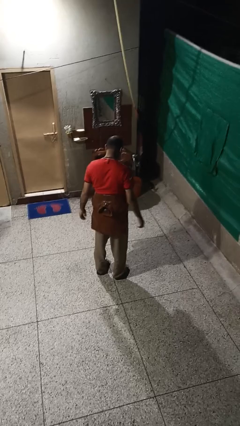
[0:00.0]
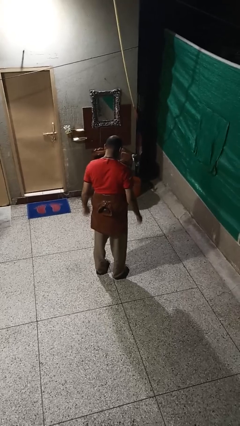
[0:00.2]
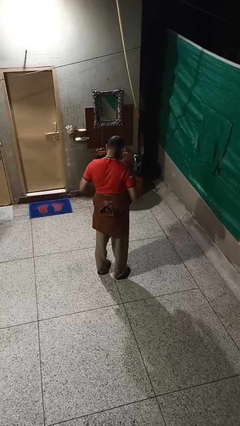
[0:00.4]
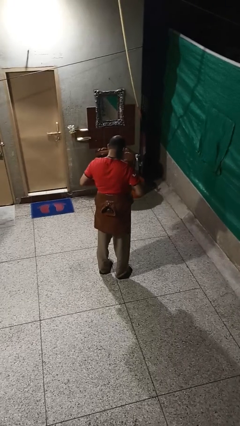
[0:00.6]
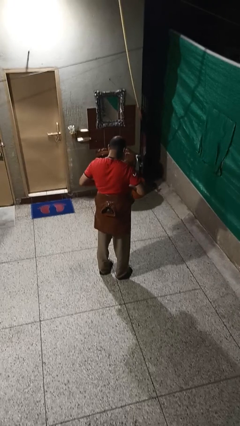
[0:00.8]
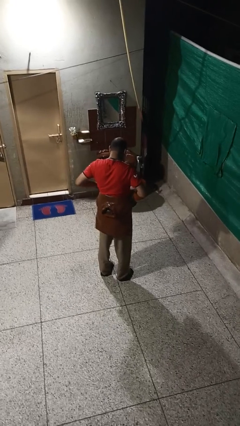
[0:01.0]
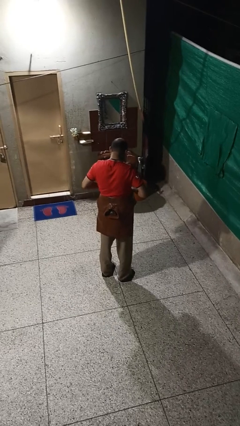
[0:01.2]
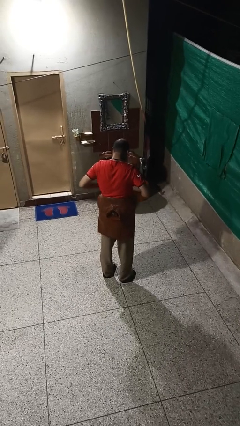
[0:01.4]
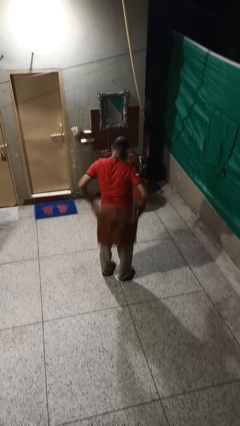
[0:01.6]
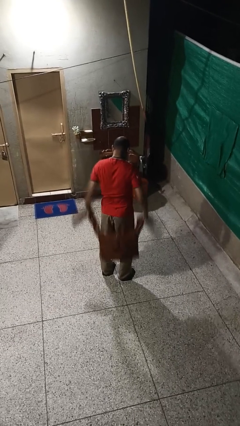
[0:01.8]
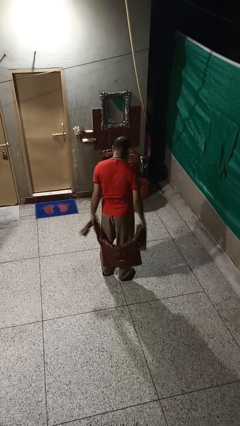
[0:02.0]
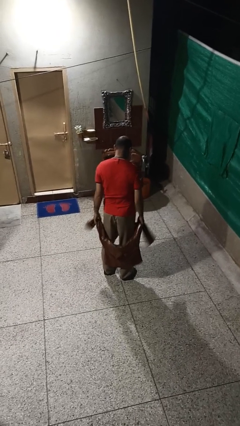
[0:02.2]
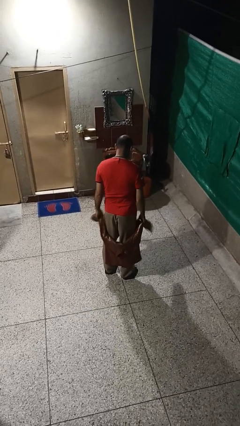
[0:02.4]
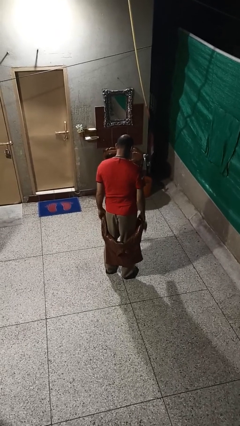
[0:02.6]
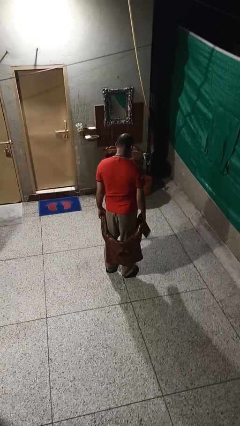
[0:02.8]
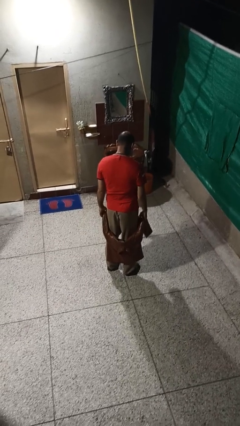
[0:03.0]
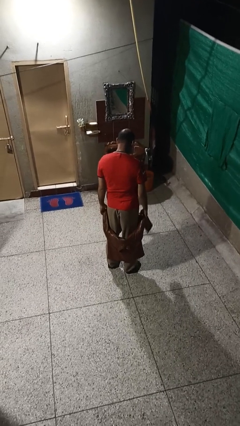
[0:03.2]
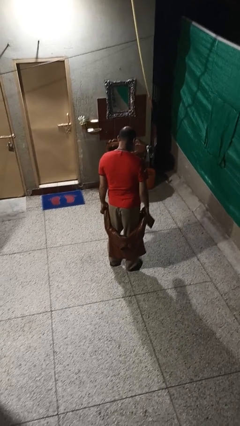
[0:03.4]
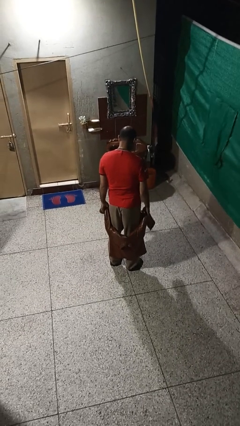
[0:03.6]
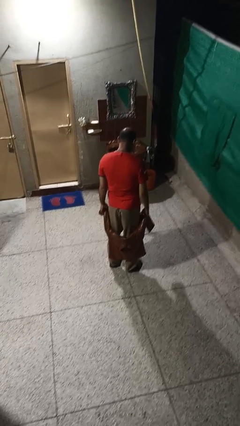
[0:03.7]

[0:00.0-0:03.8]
person unties jacket around waist

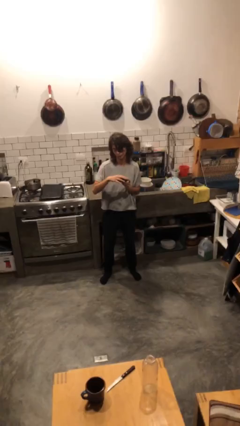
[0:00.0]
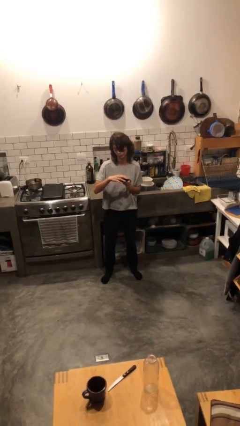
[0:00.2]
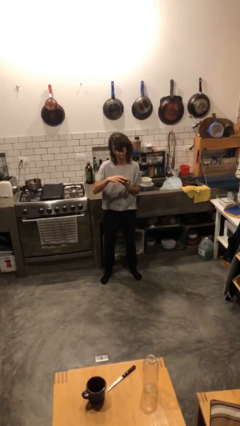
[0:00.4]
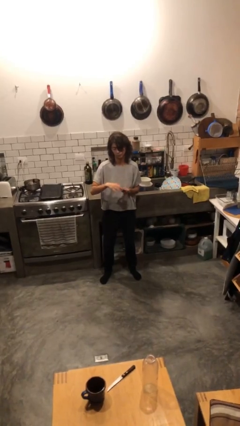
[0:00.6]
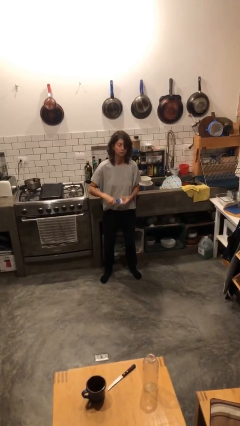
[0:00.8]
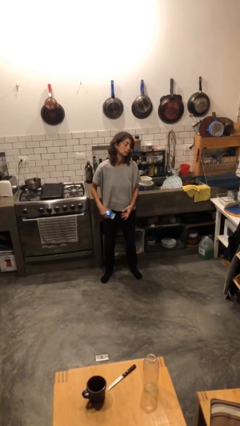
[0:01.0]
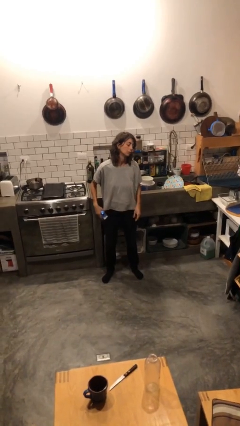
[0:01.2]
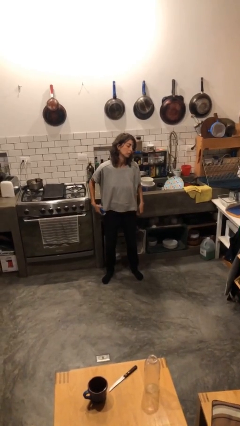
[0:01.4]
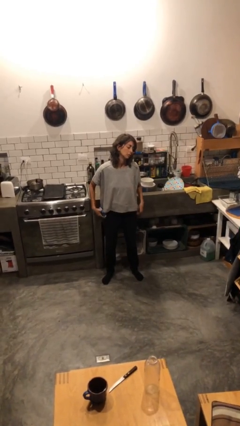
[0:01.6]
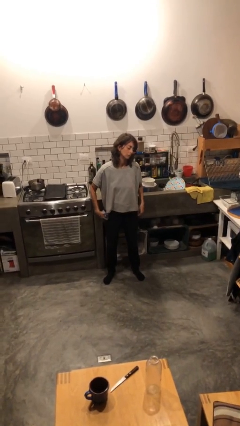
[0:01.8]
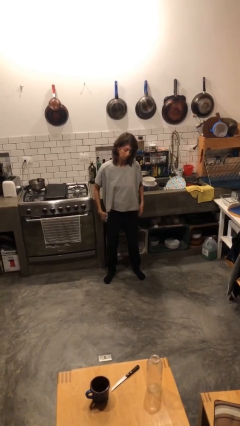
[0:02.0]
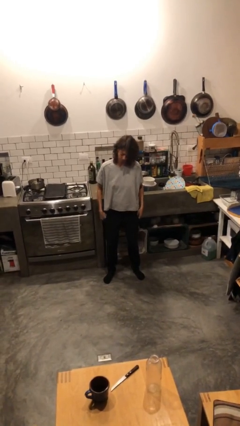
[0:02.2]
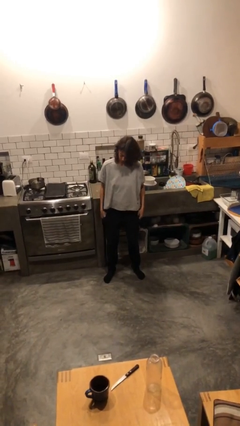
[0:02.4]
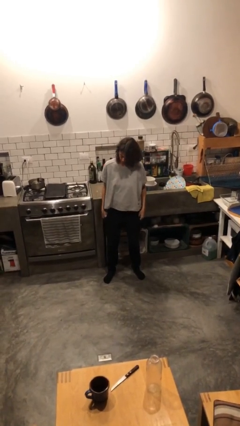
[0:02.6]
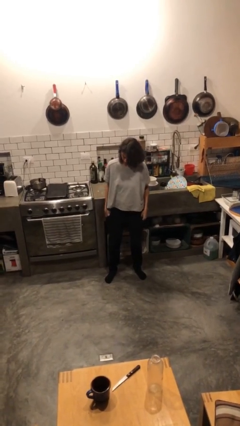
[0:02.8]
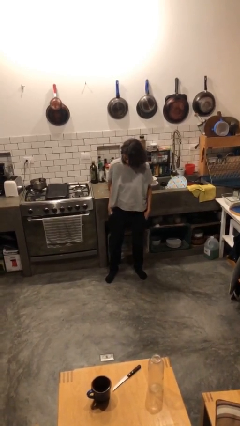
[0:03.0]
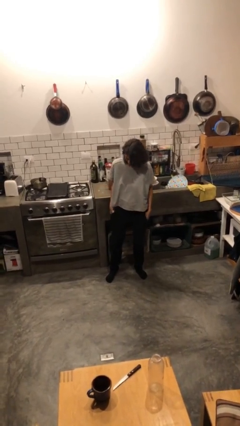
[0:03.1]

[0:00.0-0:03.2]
person puts phone into pocket

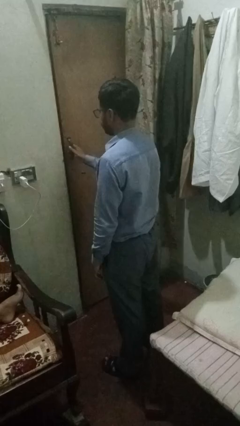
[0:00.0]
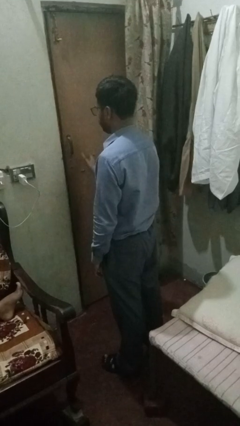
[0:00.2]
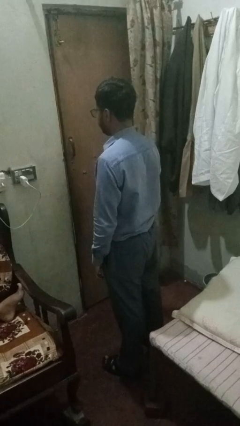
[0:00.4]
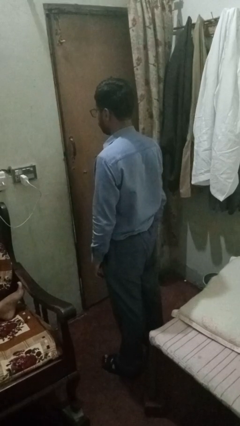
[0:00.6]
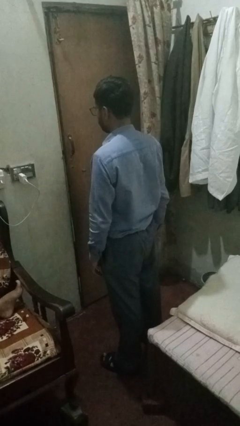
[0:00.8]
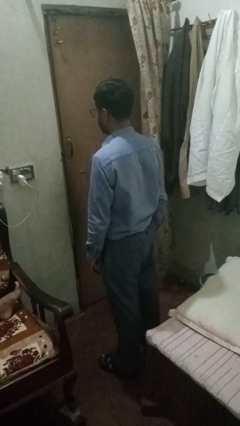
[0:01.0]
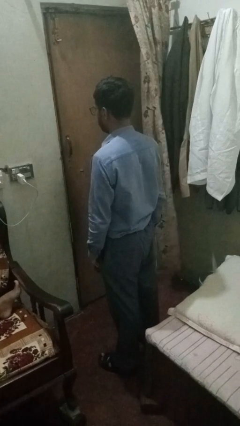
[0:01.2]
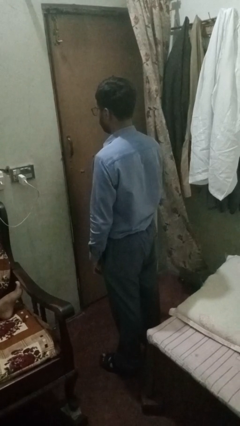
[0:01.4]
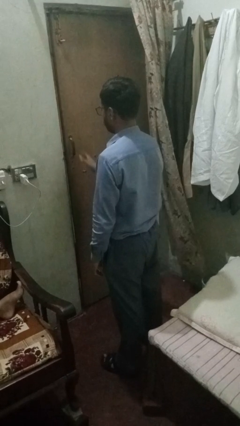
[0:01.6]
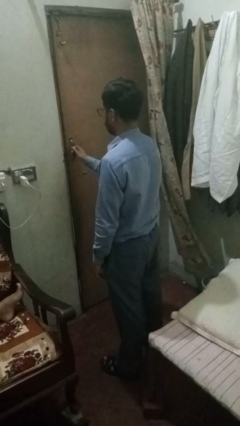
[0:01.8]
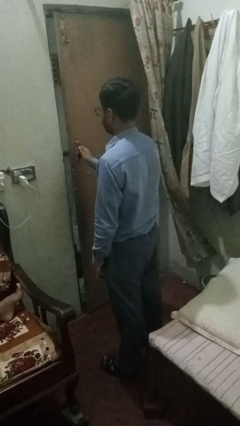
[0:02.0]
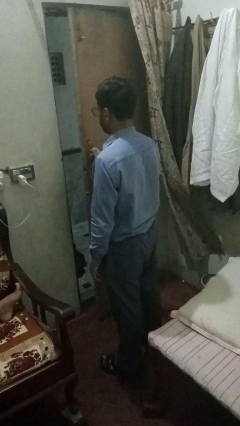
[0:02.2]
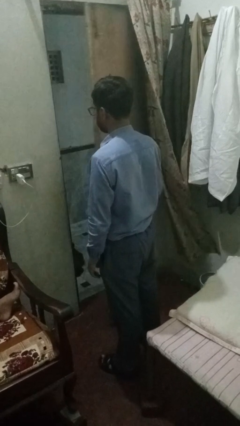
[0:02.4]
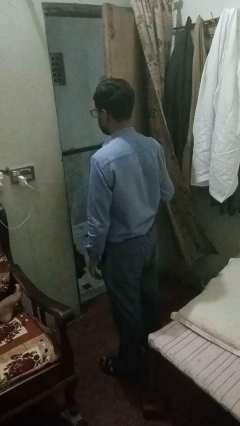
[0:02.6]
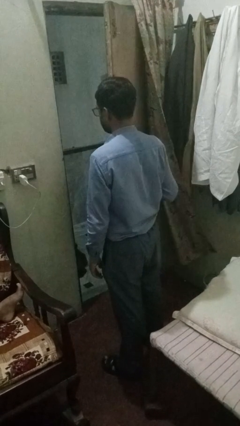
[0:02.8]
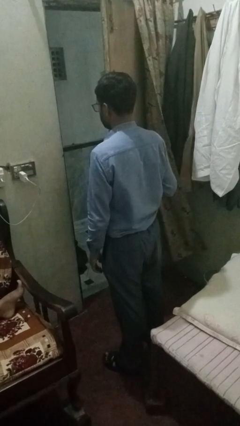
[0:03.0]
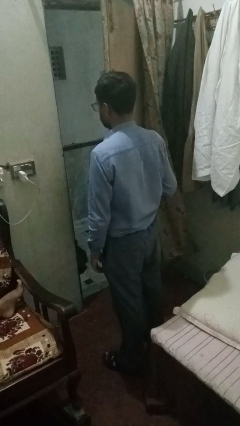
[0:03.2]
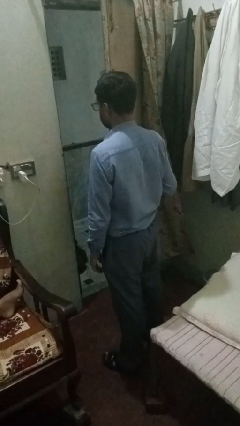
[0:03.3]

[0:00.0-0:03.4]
person opens sliding door

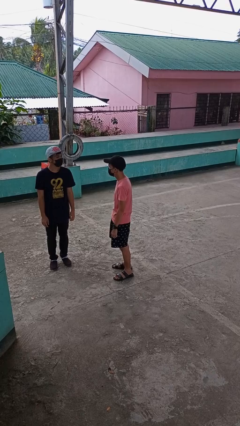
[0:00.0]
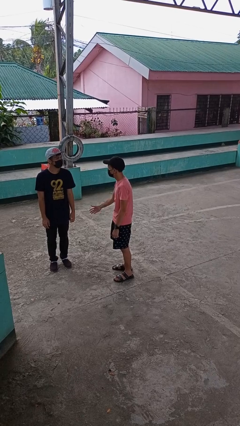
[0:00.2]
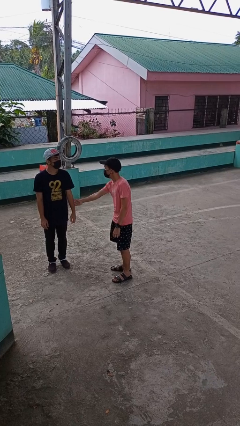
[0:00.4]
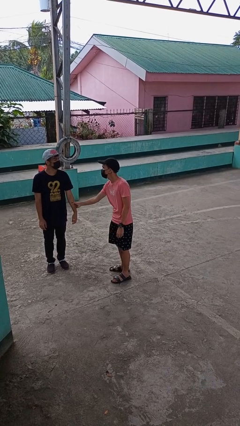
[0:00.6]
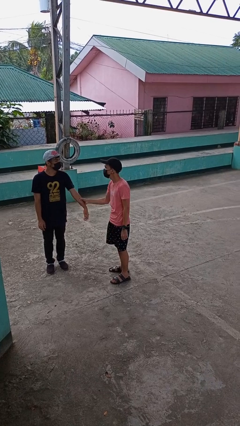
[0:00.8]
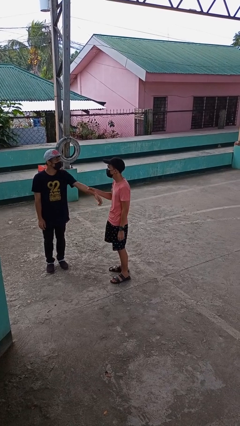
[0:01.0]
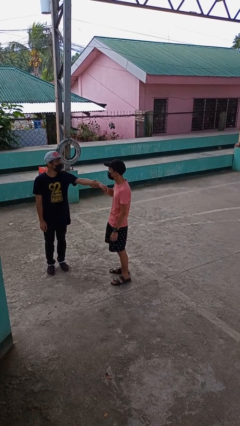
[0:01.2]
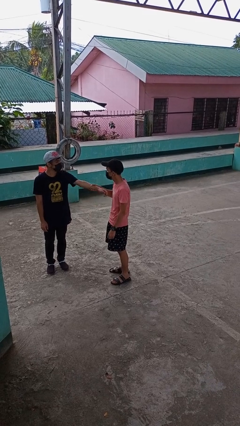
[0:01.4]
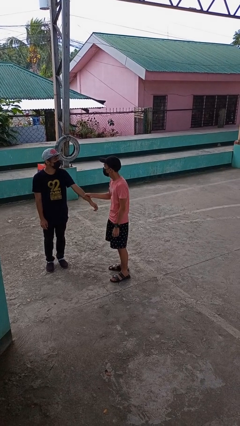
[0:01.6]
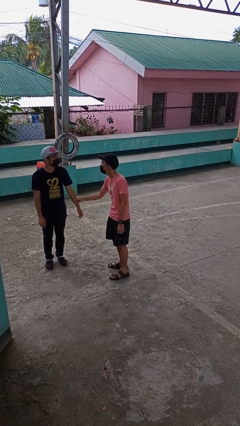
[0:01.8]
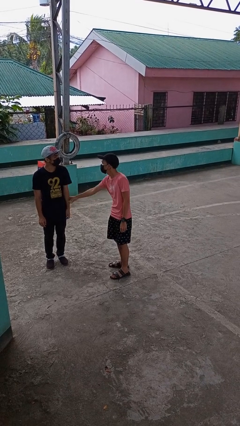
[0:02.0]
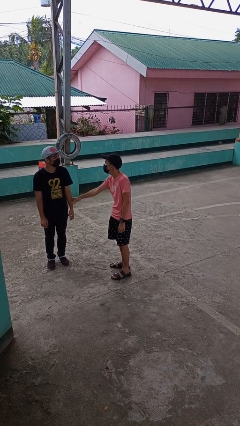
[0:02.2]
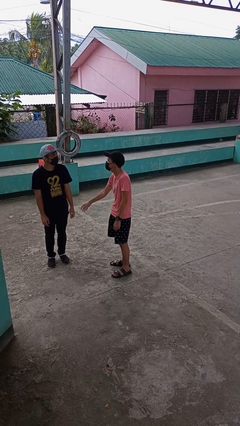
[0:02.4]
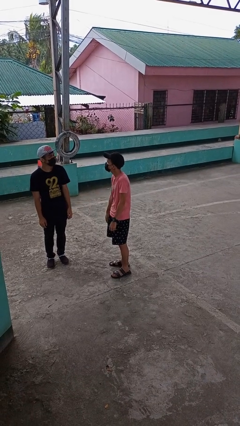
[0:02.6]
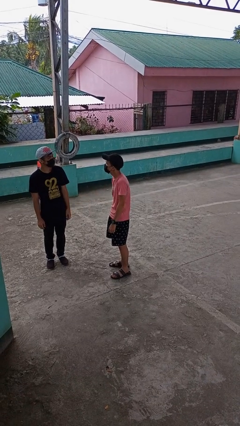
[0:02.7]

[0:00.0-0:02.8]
person grabs person by forearm

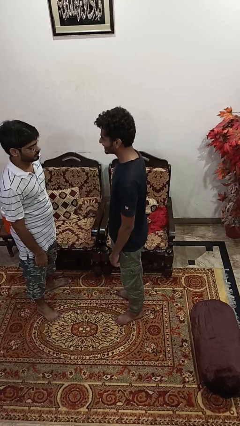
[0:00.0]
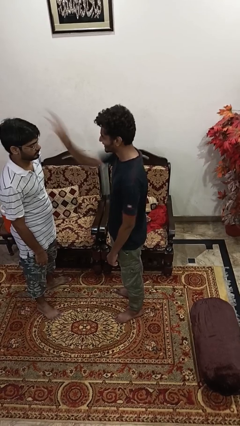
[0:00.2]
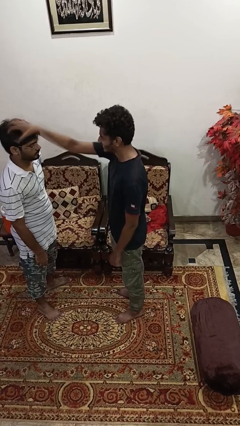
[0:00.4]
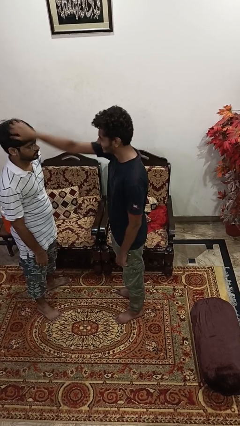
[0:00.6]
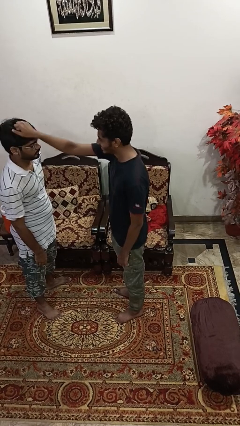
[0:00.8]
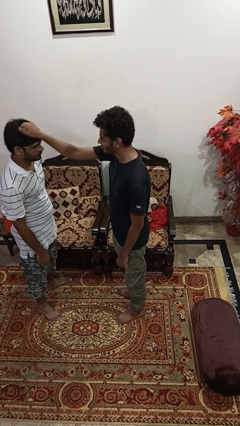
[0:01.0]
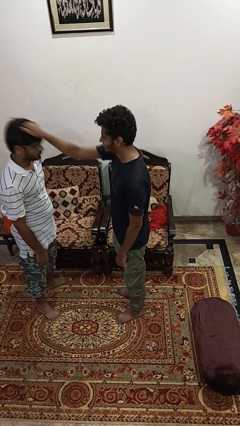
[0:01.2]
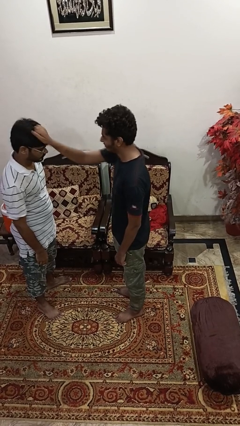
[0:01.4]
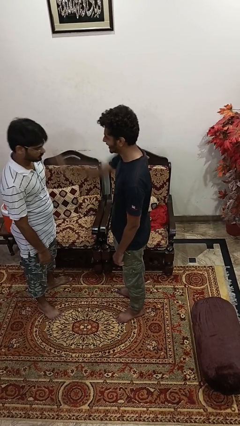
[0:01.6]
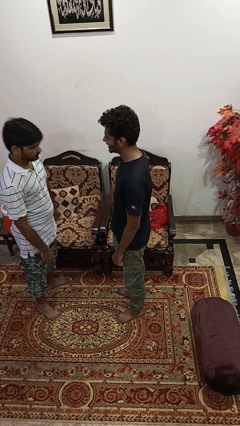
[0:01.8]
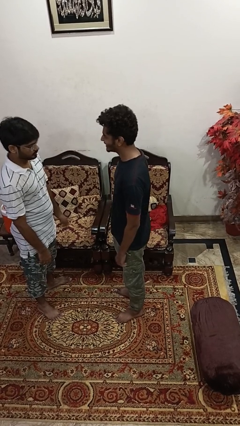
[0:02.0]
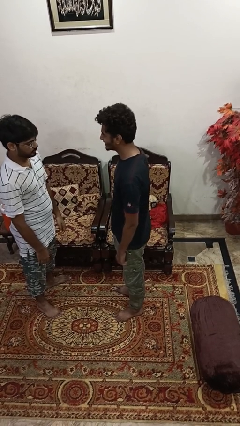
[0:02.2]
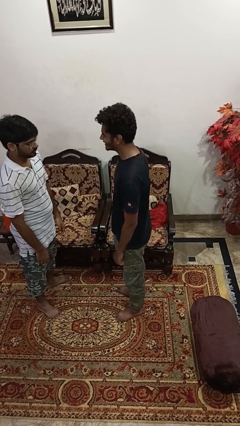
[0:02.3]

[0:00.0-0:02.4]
person spins person around

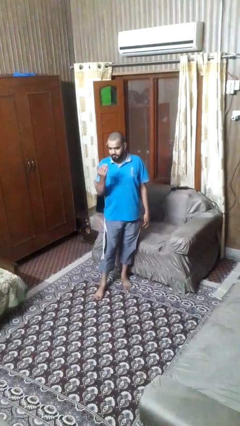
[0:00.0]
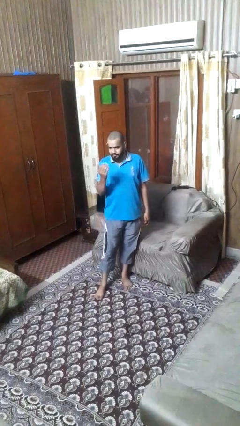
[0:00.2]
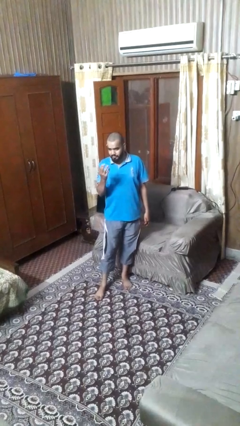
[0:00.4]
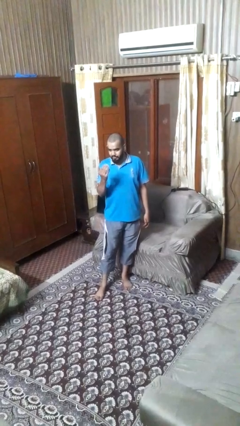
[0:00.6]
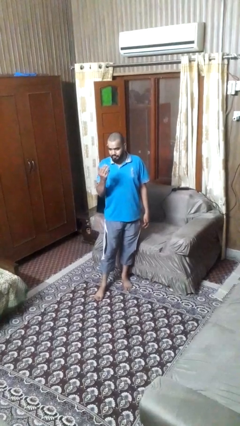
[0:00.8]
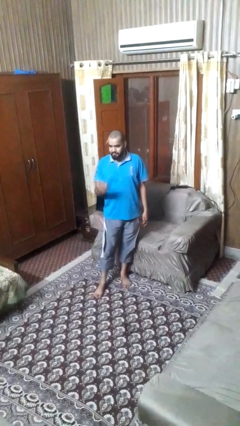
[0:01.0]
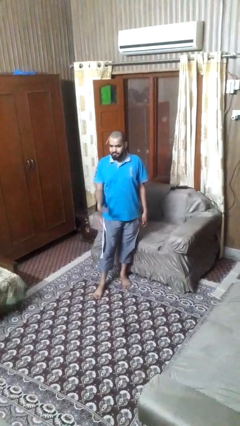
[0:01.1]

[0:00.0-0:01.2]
person gestures come here

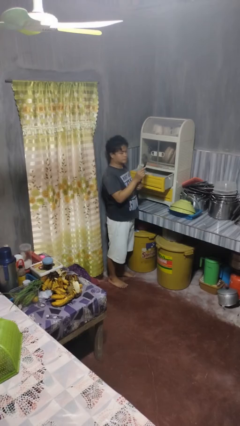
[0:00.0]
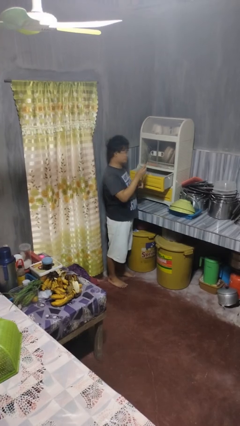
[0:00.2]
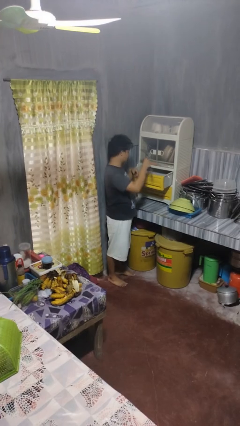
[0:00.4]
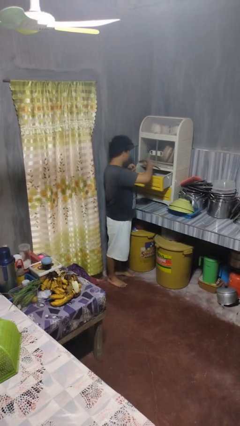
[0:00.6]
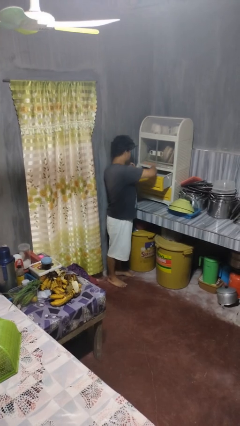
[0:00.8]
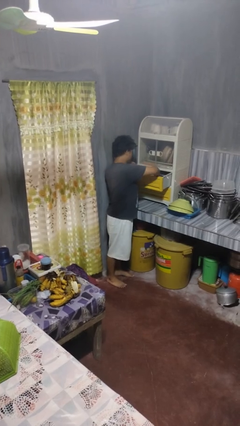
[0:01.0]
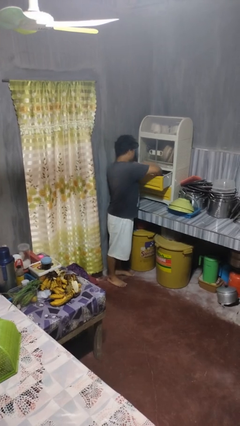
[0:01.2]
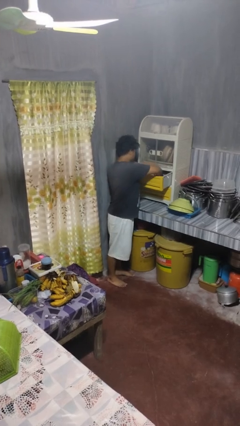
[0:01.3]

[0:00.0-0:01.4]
person puts object into kitchen drawer
